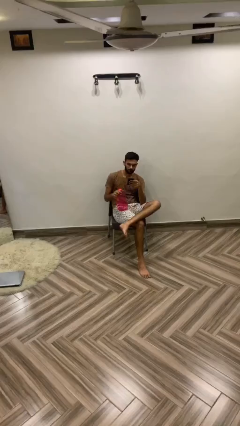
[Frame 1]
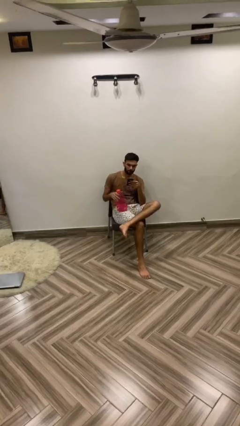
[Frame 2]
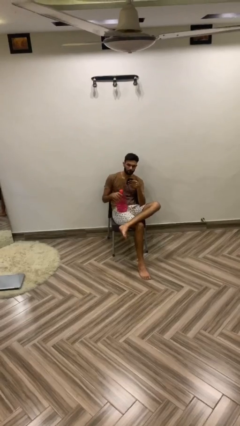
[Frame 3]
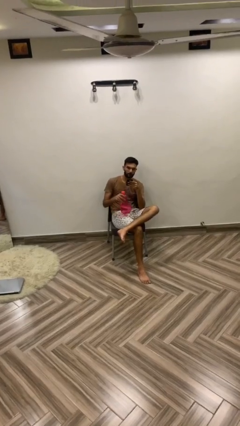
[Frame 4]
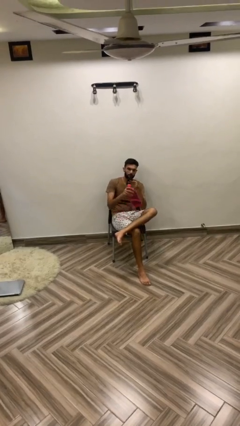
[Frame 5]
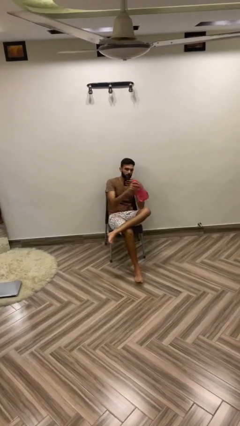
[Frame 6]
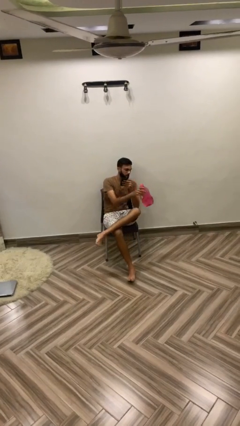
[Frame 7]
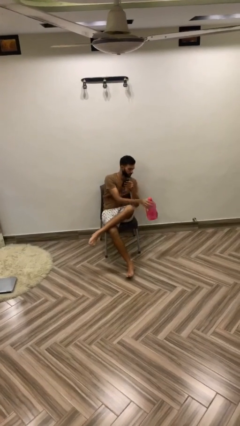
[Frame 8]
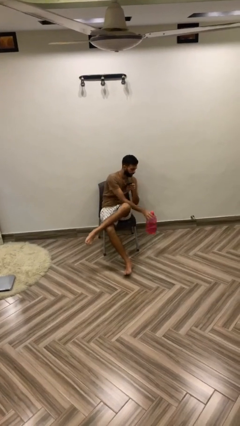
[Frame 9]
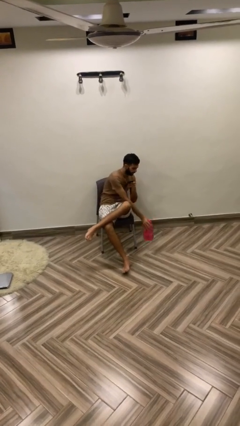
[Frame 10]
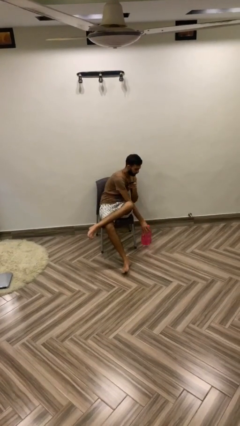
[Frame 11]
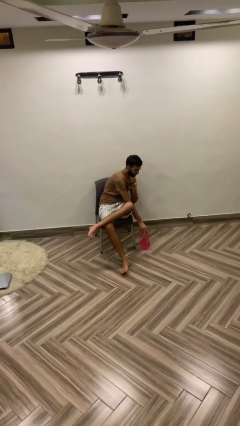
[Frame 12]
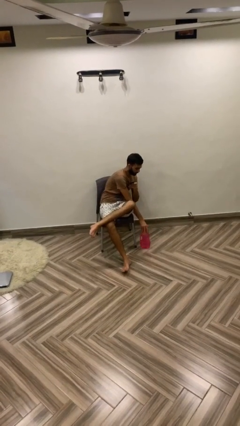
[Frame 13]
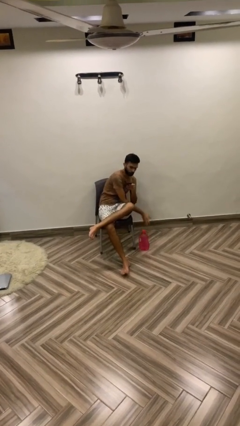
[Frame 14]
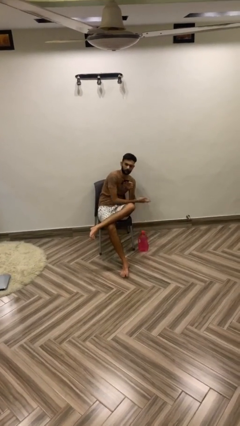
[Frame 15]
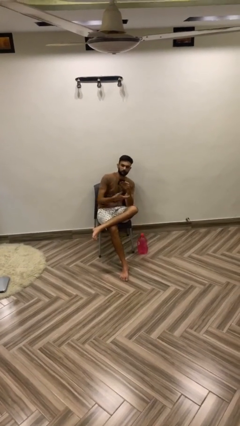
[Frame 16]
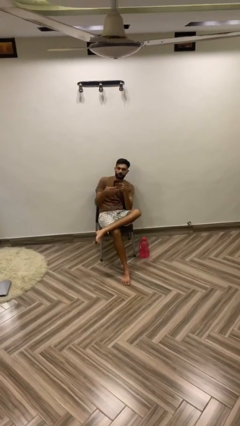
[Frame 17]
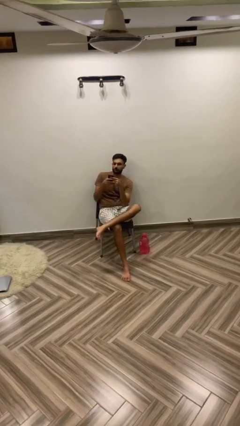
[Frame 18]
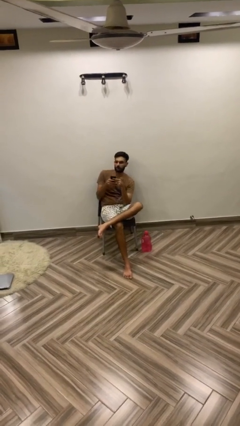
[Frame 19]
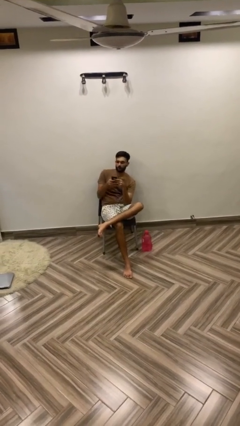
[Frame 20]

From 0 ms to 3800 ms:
person puts down object on floor

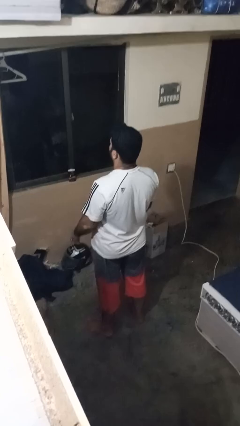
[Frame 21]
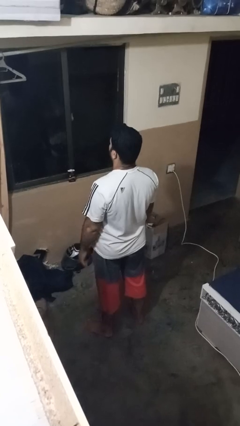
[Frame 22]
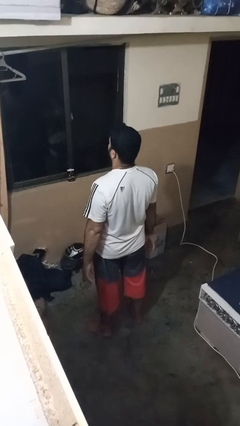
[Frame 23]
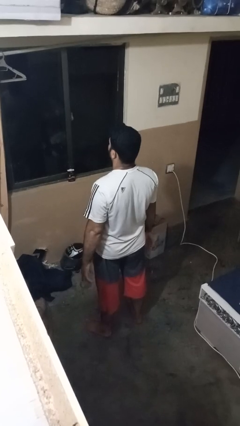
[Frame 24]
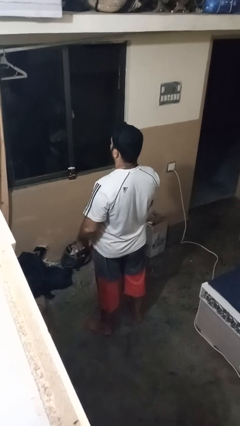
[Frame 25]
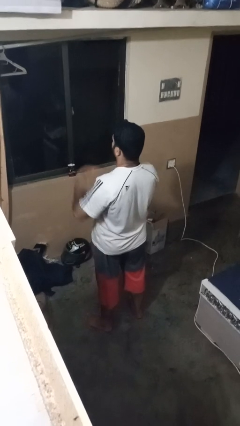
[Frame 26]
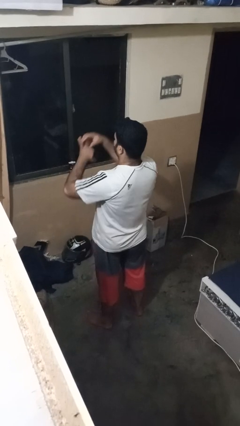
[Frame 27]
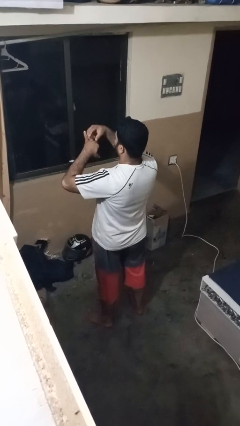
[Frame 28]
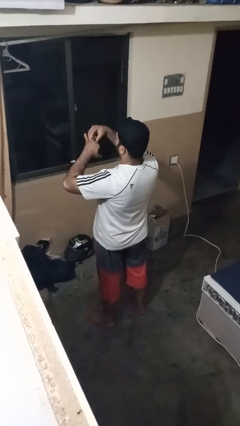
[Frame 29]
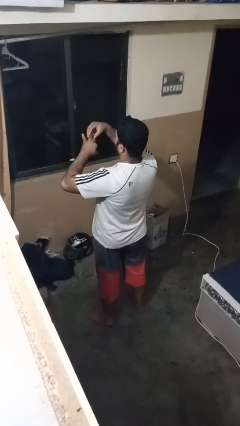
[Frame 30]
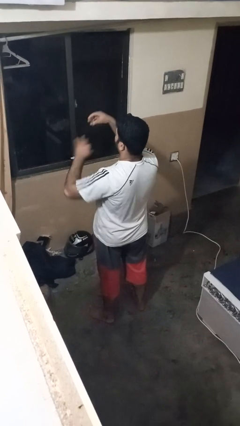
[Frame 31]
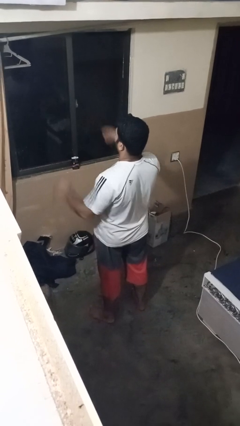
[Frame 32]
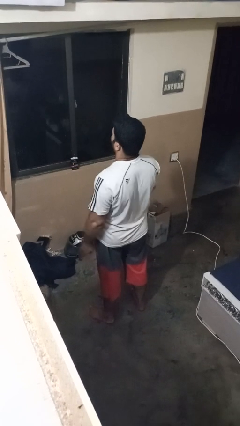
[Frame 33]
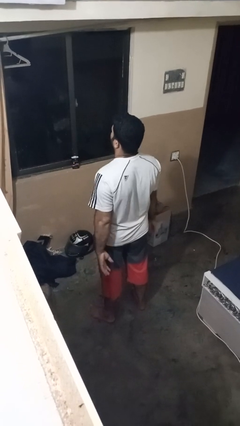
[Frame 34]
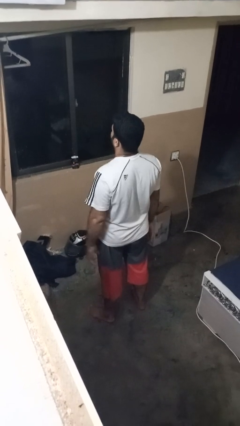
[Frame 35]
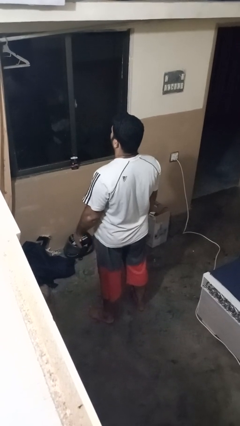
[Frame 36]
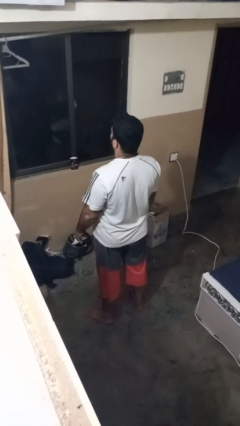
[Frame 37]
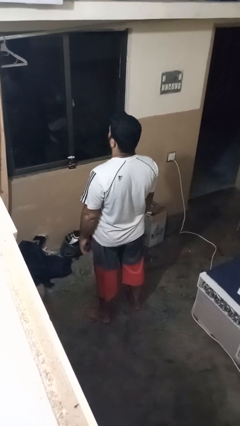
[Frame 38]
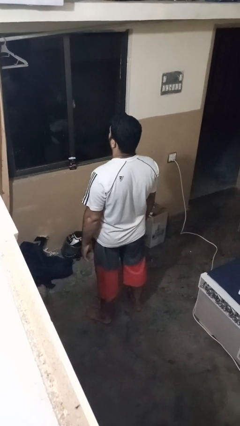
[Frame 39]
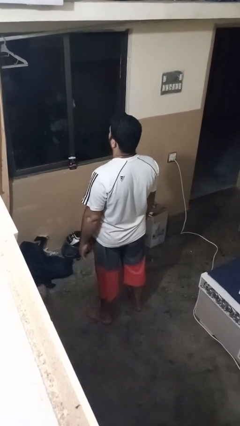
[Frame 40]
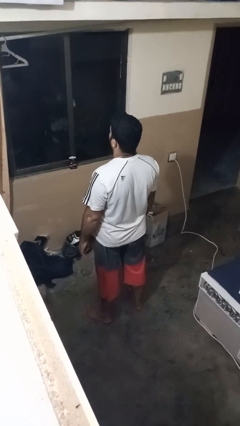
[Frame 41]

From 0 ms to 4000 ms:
person takes off ring

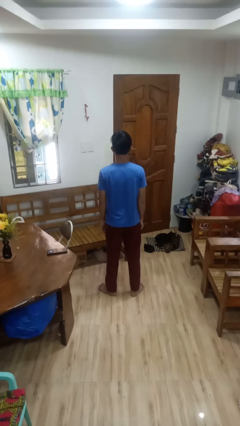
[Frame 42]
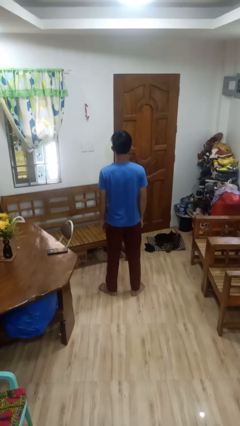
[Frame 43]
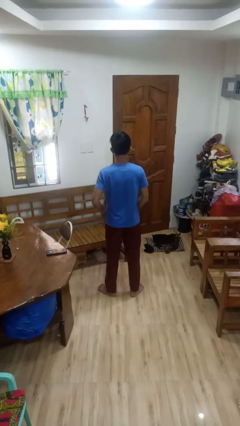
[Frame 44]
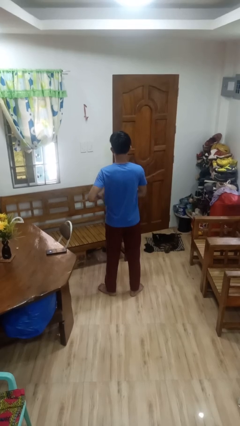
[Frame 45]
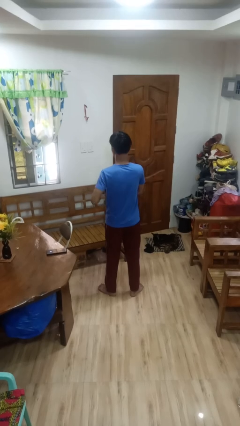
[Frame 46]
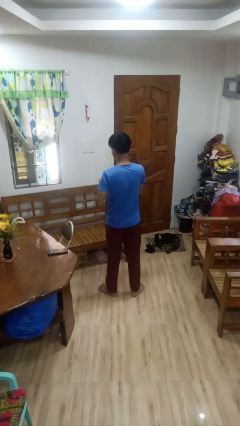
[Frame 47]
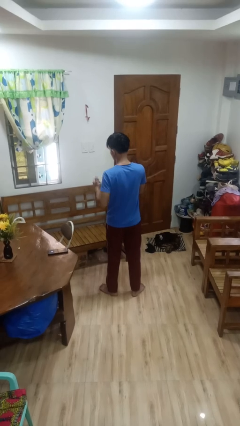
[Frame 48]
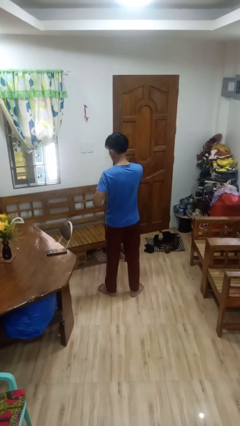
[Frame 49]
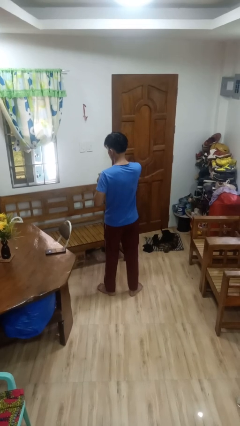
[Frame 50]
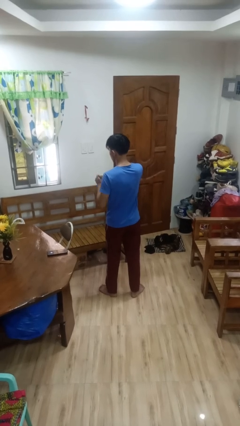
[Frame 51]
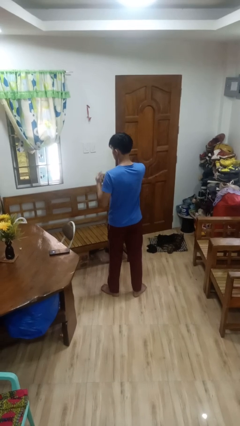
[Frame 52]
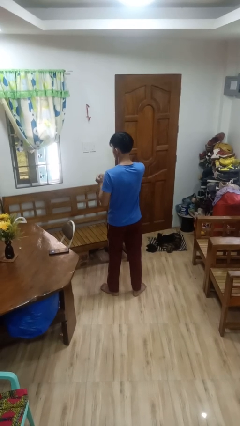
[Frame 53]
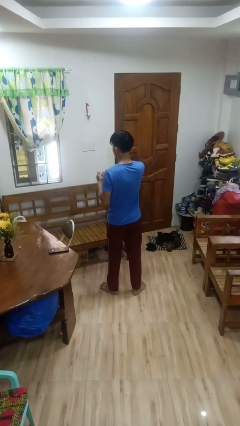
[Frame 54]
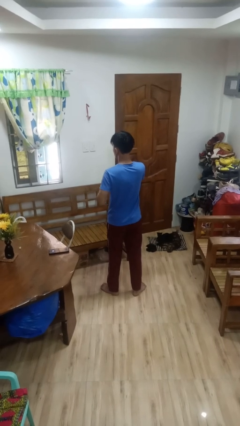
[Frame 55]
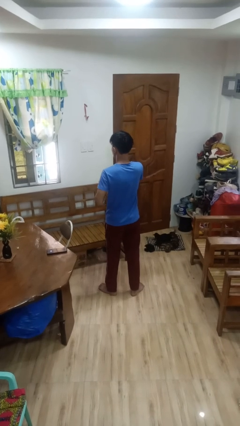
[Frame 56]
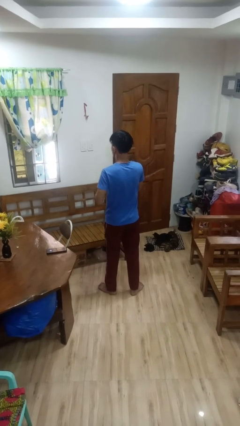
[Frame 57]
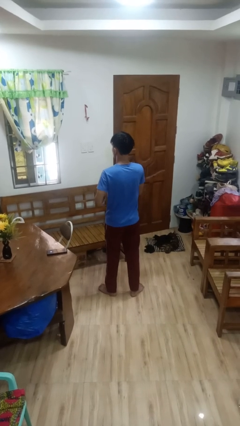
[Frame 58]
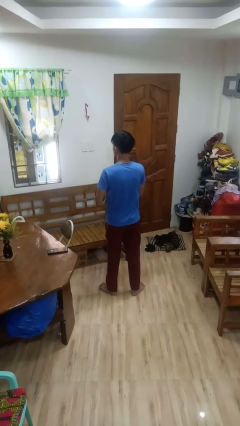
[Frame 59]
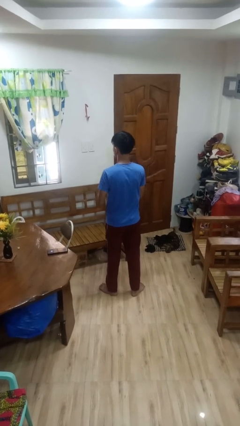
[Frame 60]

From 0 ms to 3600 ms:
person cracks knuckles

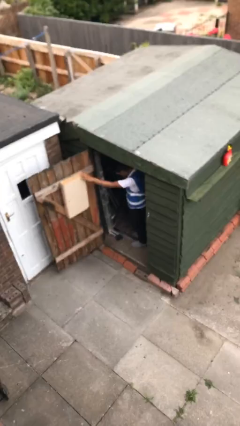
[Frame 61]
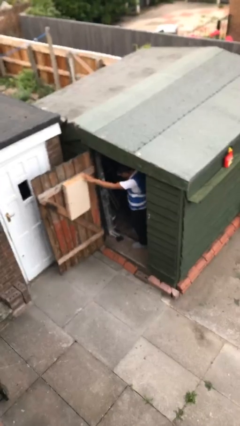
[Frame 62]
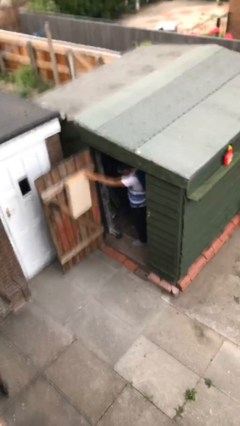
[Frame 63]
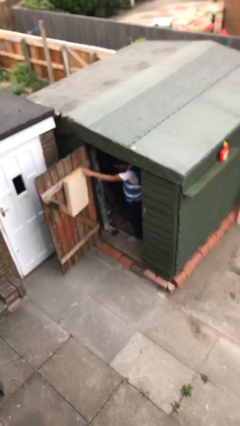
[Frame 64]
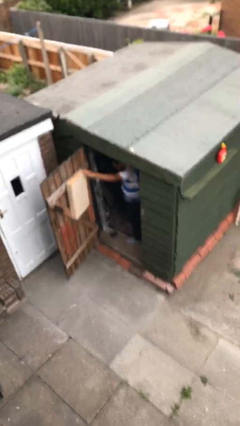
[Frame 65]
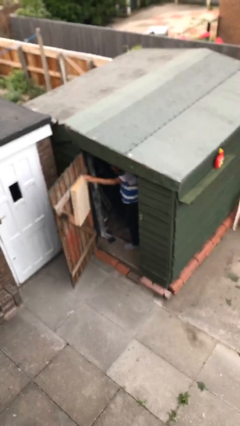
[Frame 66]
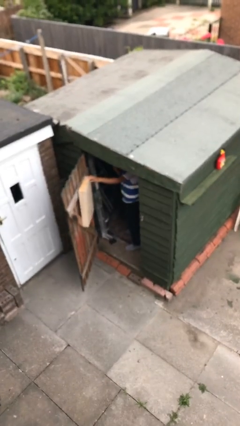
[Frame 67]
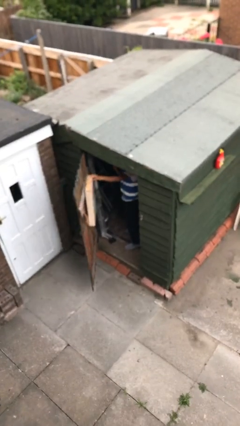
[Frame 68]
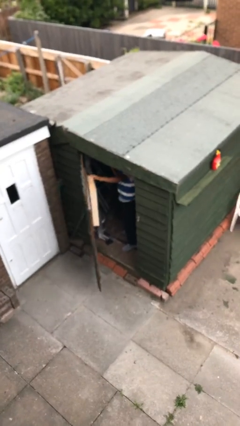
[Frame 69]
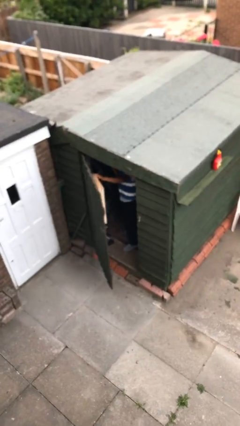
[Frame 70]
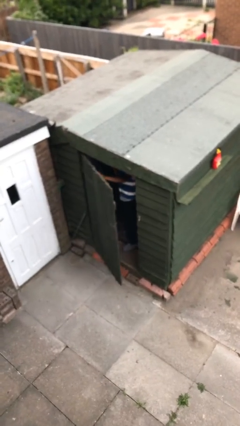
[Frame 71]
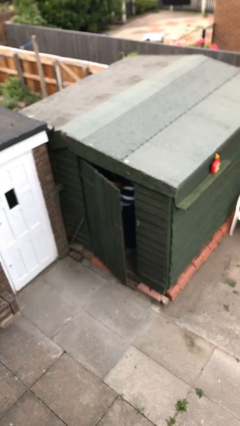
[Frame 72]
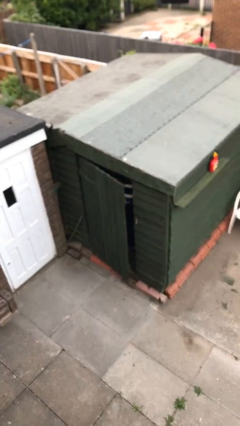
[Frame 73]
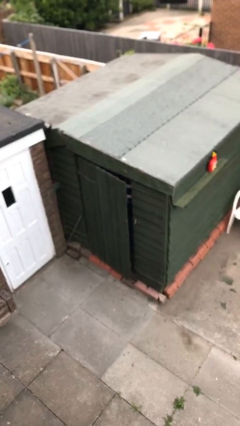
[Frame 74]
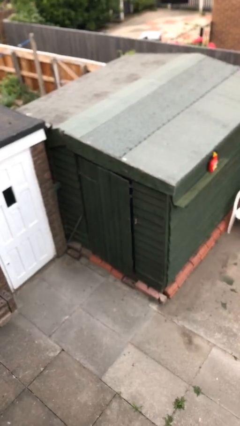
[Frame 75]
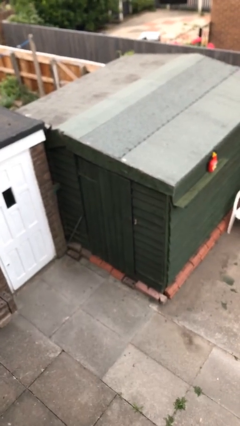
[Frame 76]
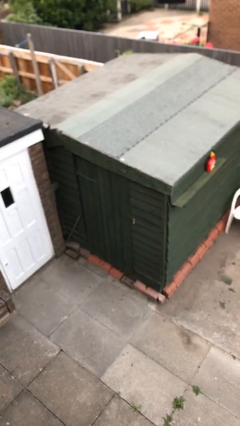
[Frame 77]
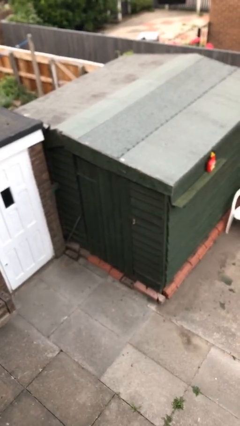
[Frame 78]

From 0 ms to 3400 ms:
person closes facility door

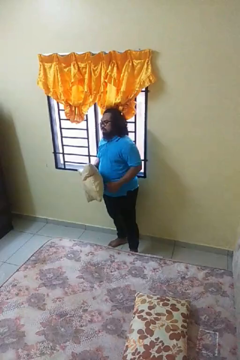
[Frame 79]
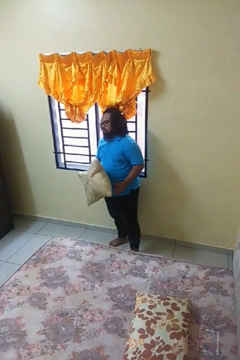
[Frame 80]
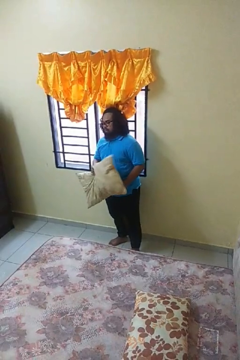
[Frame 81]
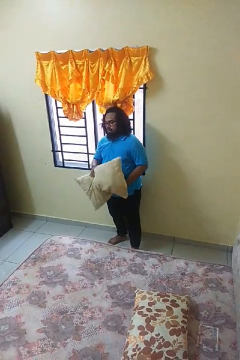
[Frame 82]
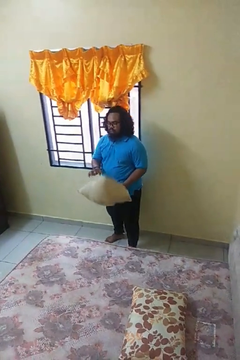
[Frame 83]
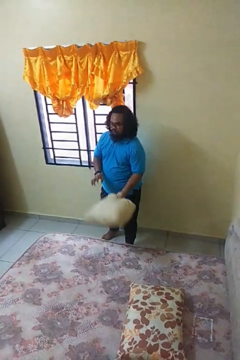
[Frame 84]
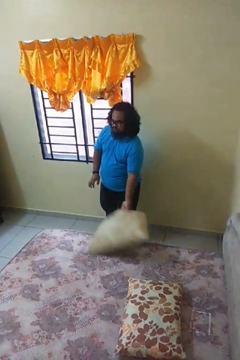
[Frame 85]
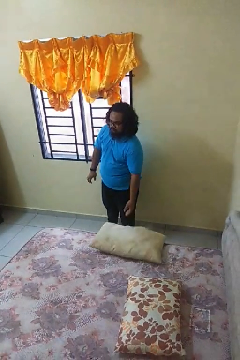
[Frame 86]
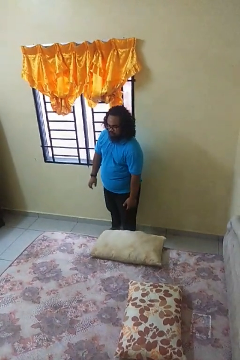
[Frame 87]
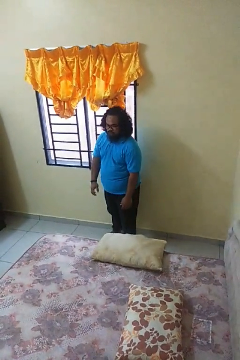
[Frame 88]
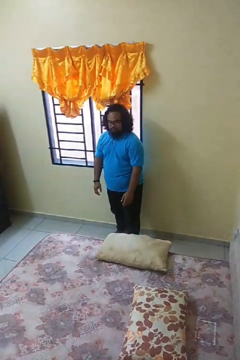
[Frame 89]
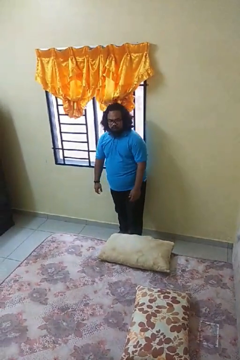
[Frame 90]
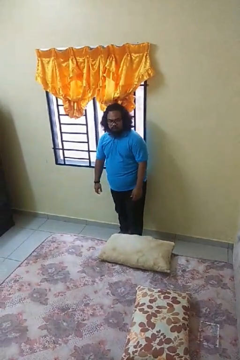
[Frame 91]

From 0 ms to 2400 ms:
person puts down object on bed

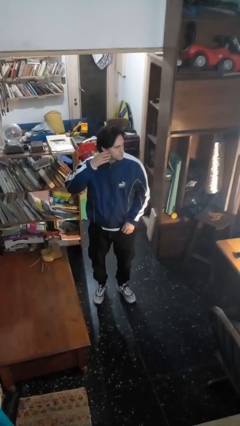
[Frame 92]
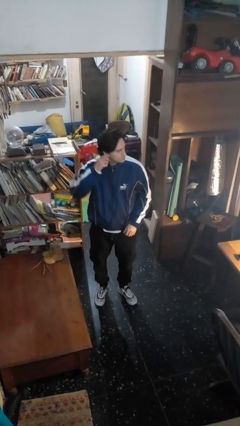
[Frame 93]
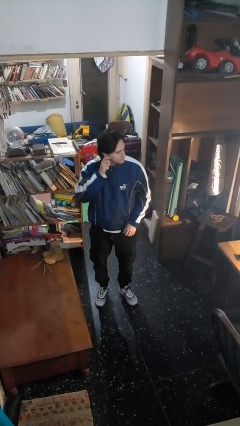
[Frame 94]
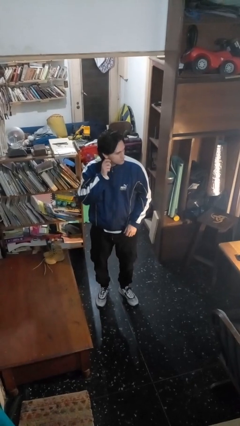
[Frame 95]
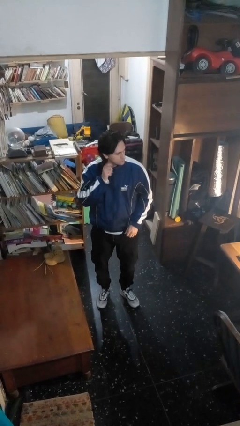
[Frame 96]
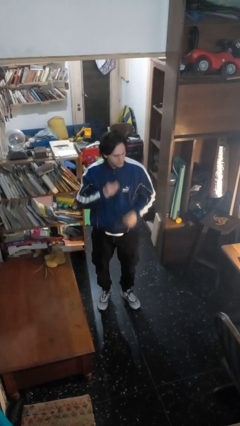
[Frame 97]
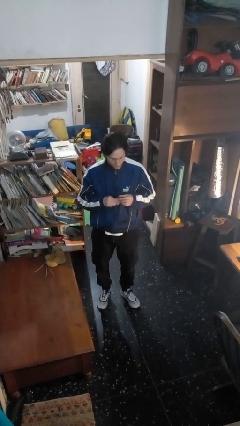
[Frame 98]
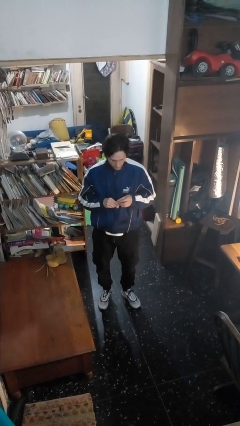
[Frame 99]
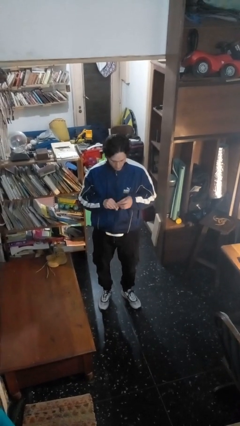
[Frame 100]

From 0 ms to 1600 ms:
person takes off earrings
